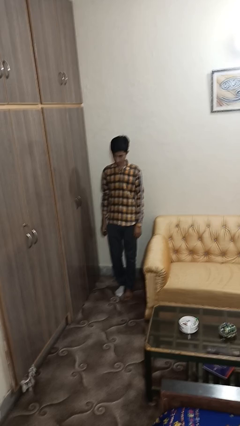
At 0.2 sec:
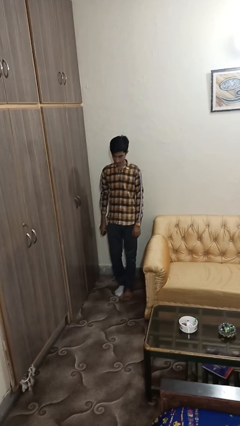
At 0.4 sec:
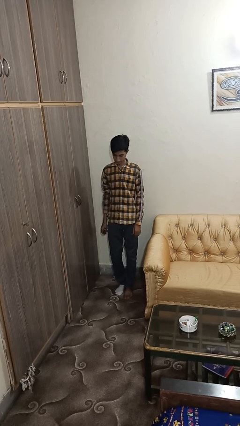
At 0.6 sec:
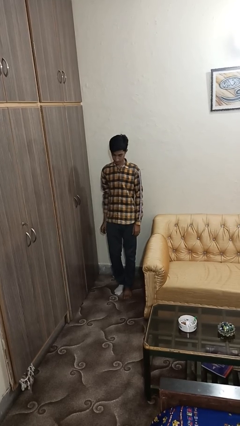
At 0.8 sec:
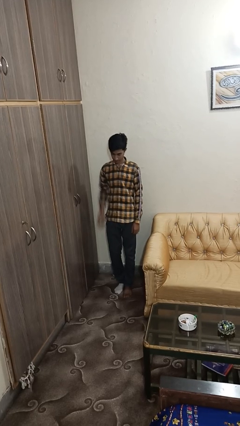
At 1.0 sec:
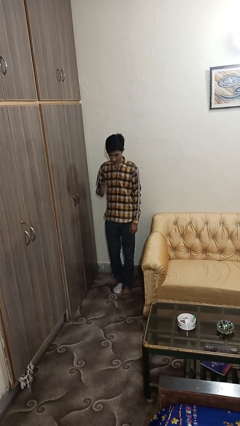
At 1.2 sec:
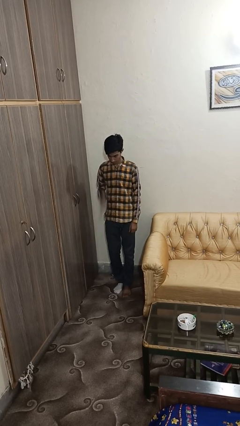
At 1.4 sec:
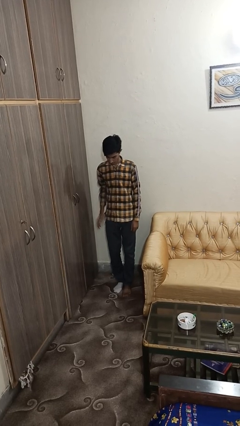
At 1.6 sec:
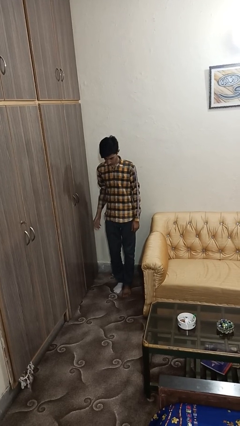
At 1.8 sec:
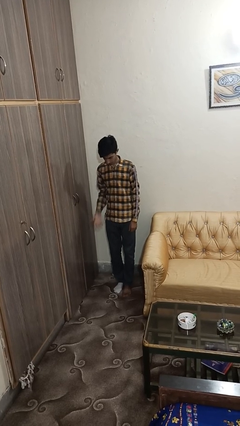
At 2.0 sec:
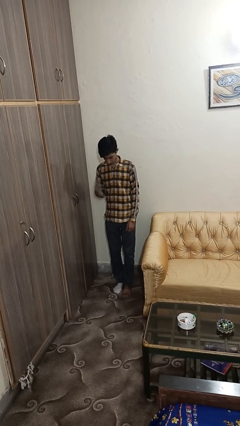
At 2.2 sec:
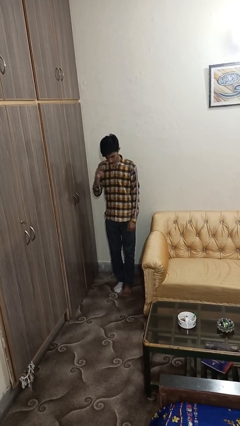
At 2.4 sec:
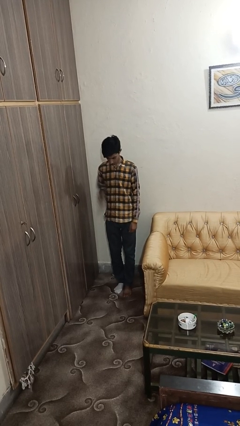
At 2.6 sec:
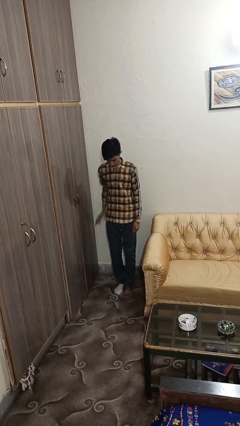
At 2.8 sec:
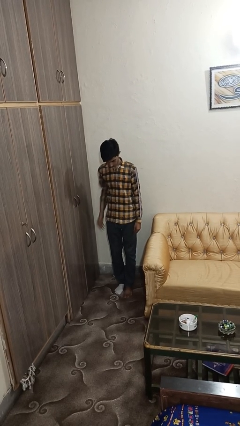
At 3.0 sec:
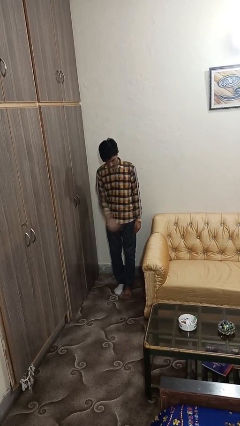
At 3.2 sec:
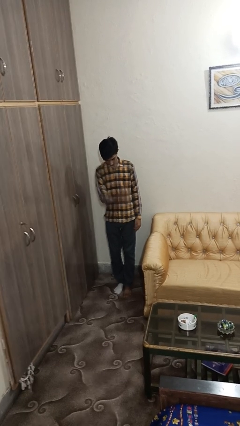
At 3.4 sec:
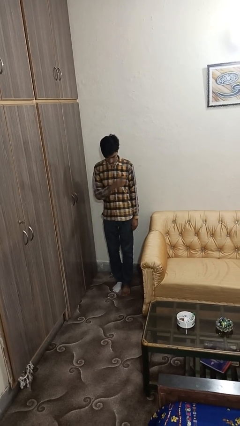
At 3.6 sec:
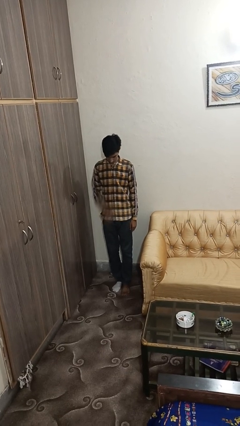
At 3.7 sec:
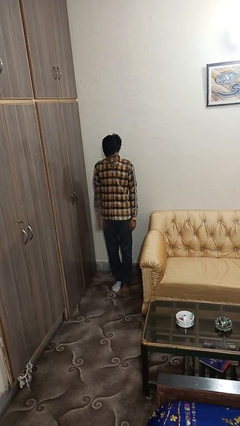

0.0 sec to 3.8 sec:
person bounces ball on floor

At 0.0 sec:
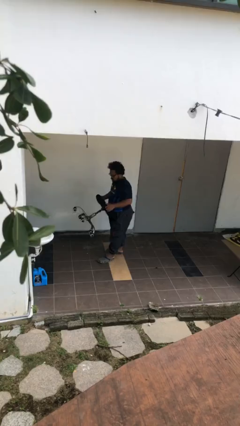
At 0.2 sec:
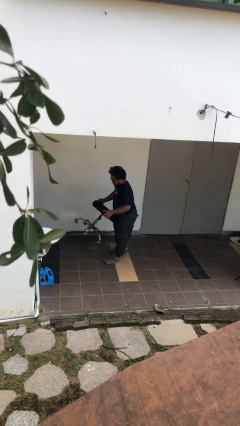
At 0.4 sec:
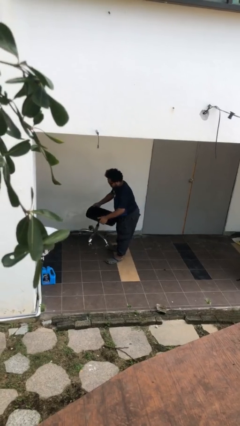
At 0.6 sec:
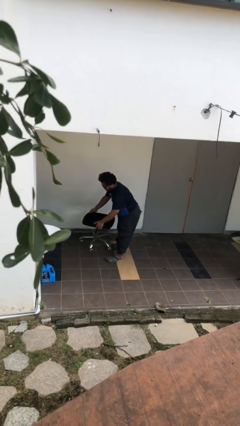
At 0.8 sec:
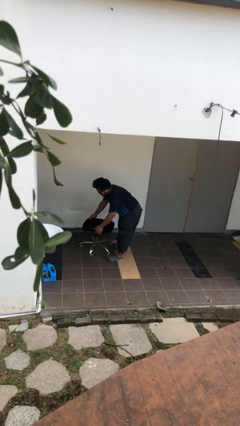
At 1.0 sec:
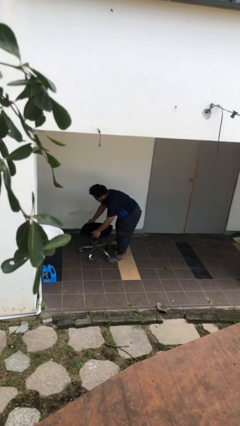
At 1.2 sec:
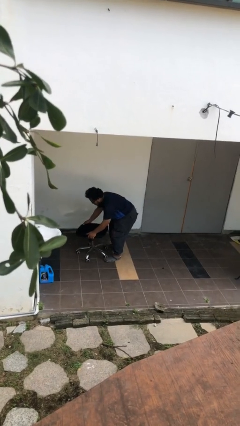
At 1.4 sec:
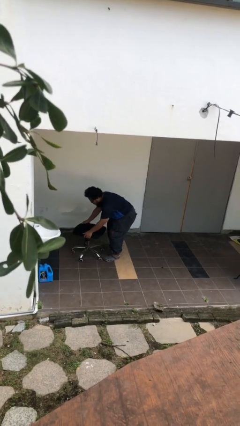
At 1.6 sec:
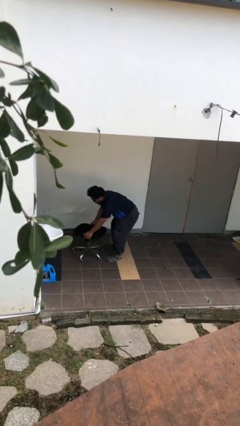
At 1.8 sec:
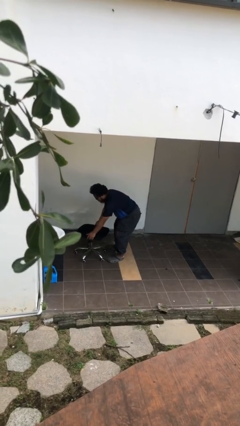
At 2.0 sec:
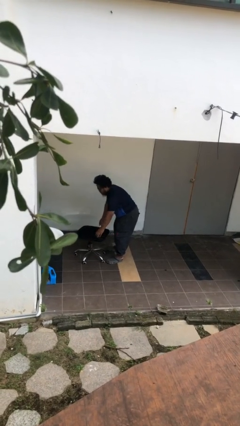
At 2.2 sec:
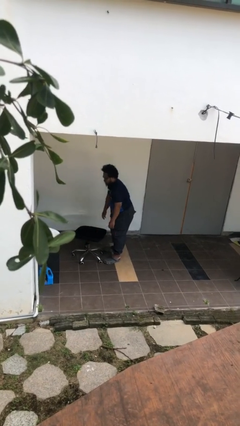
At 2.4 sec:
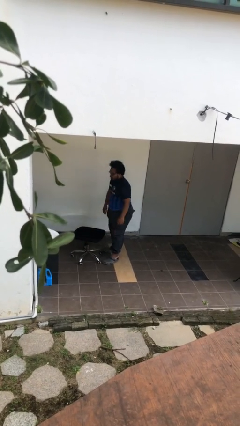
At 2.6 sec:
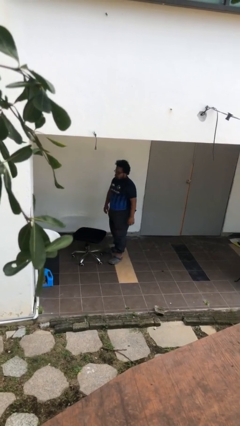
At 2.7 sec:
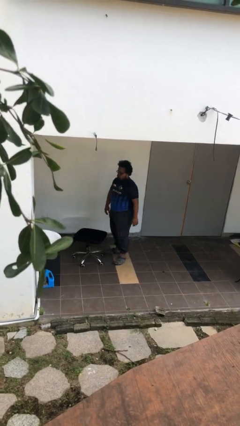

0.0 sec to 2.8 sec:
person puts down object on floor

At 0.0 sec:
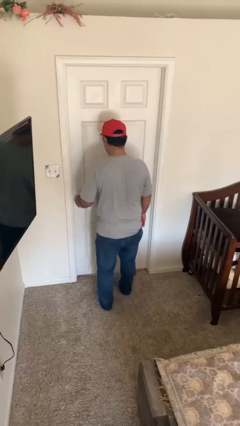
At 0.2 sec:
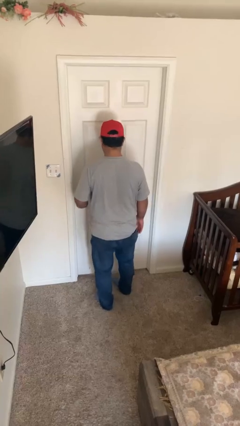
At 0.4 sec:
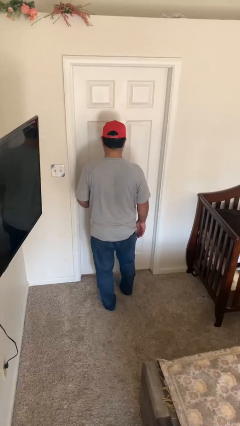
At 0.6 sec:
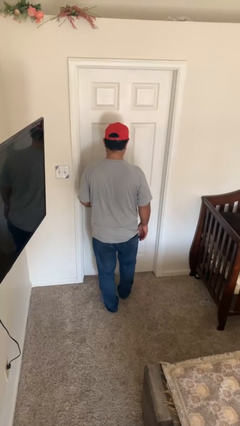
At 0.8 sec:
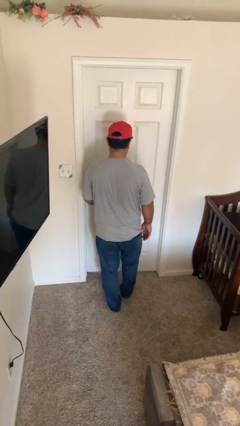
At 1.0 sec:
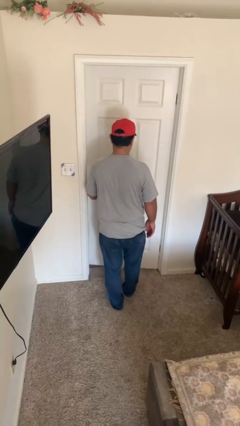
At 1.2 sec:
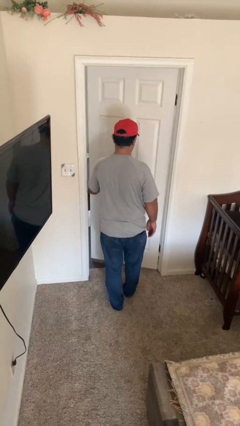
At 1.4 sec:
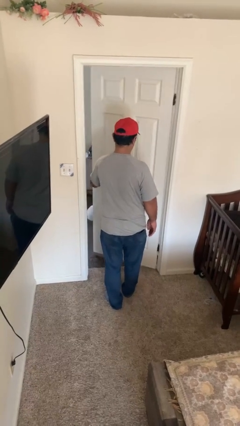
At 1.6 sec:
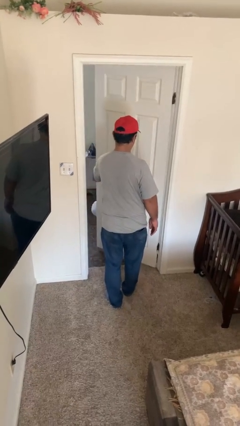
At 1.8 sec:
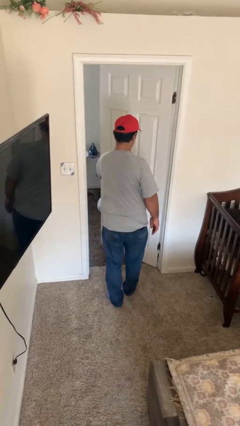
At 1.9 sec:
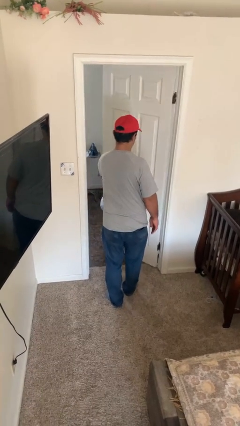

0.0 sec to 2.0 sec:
person opens facility door

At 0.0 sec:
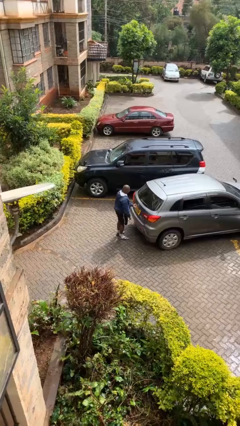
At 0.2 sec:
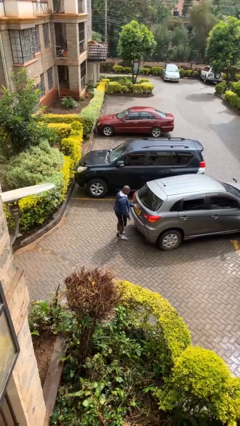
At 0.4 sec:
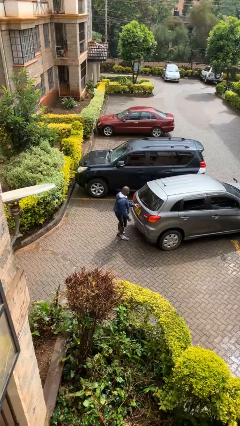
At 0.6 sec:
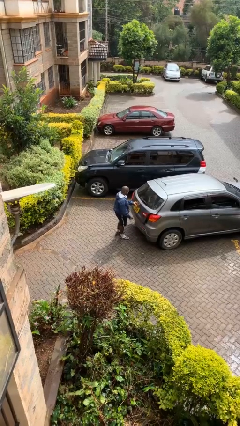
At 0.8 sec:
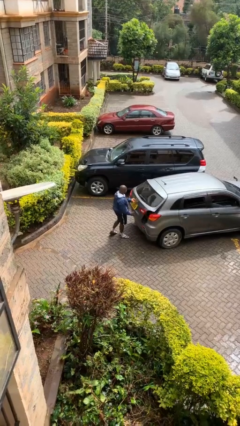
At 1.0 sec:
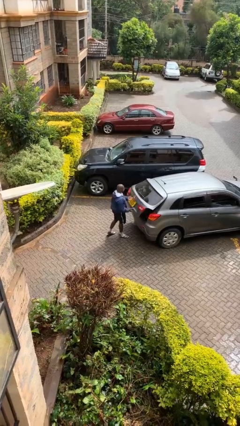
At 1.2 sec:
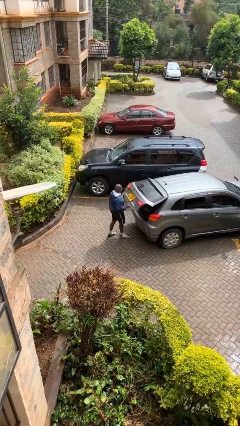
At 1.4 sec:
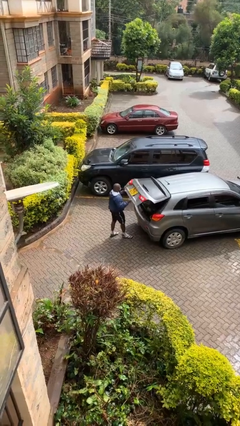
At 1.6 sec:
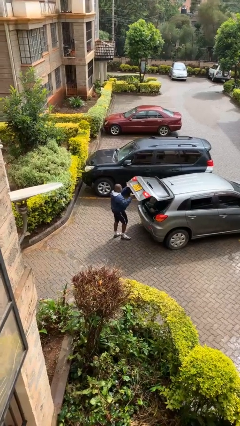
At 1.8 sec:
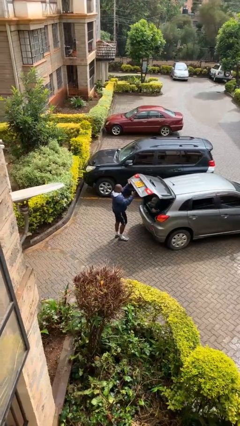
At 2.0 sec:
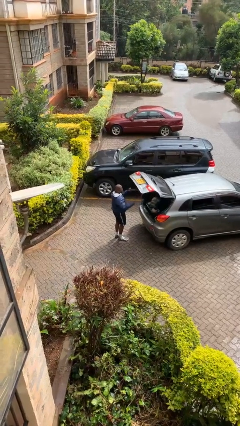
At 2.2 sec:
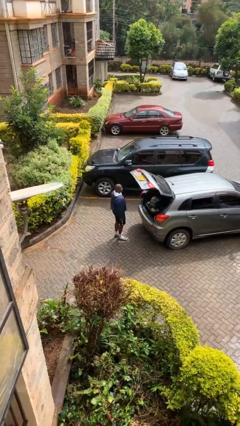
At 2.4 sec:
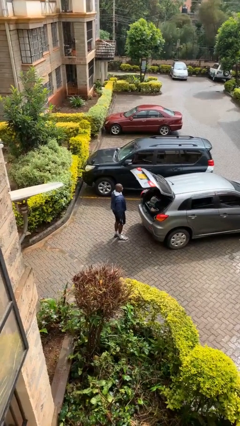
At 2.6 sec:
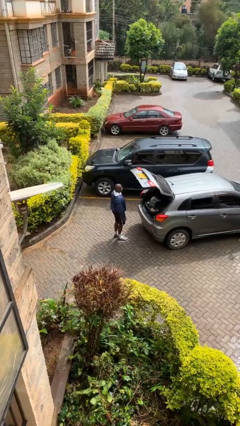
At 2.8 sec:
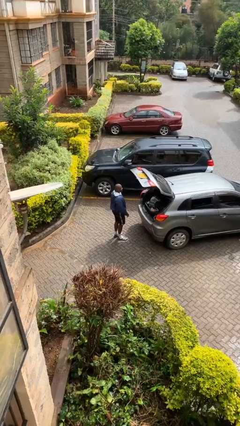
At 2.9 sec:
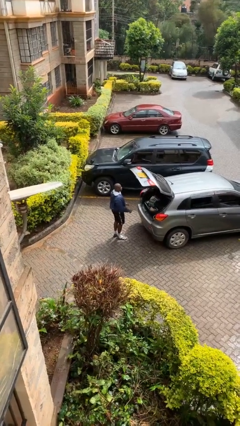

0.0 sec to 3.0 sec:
person opens car trunk

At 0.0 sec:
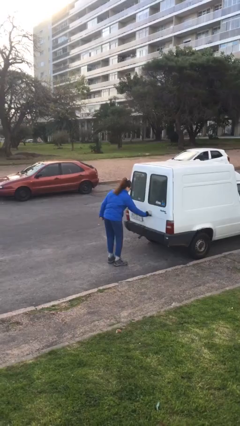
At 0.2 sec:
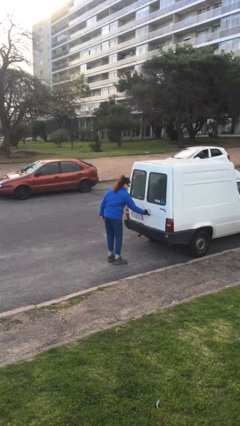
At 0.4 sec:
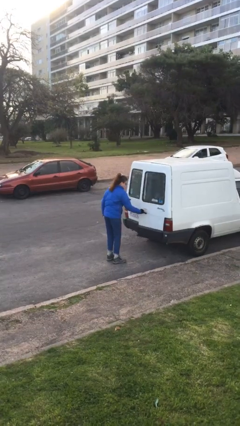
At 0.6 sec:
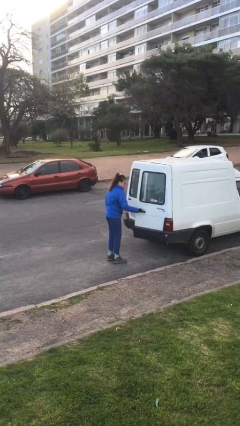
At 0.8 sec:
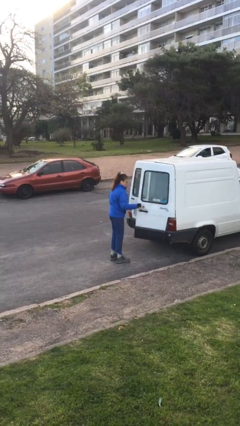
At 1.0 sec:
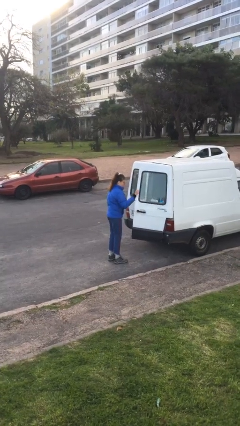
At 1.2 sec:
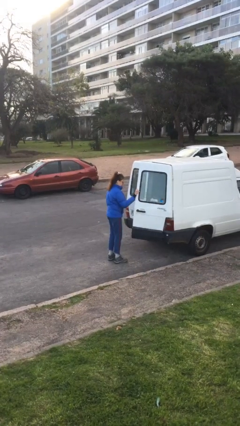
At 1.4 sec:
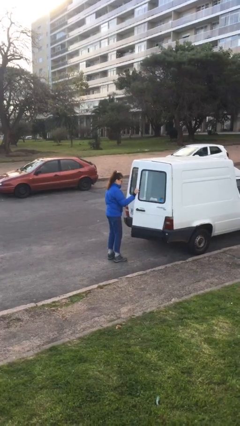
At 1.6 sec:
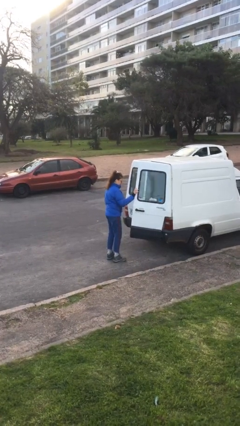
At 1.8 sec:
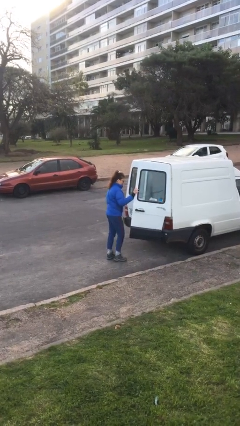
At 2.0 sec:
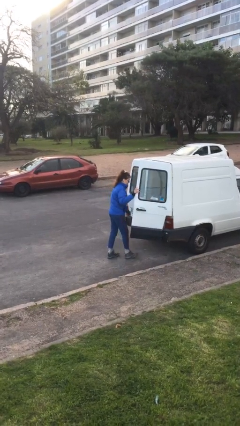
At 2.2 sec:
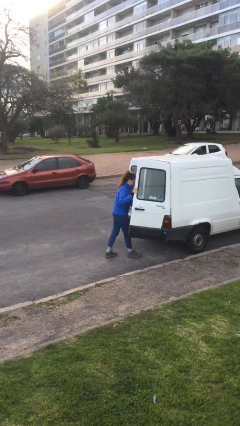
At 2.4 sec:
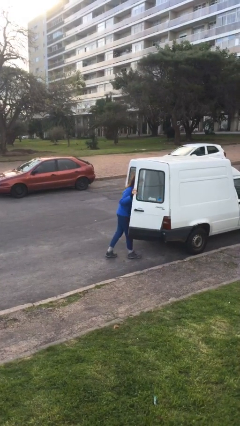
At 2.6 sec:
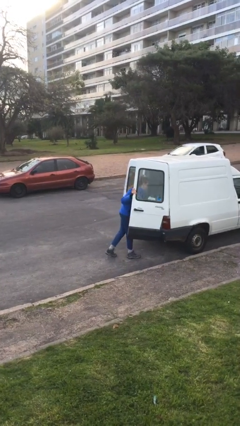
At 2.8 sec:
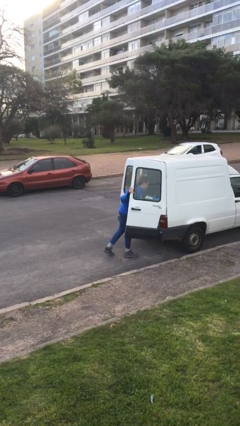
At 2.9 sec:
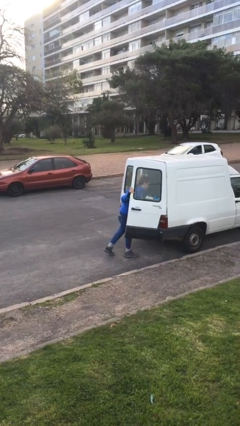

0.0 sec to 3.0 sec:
person opens car door

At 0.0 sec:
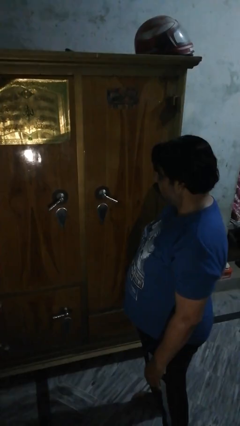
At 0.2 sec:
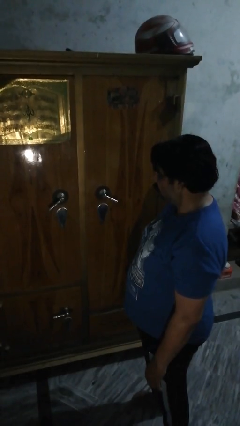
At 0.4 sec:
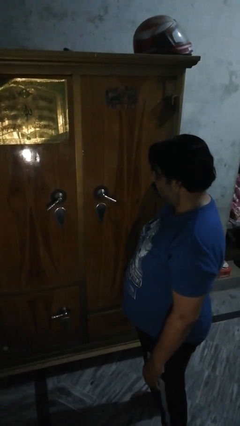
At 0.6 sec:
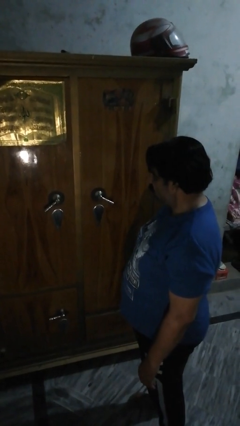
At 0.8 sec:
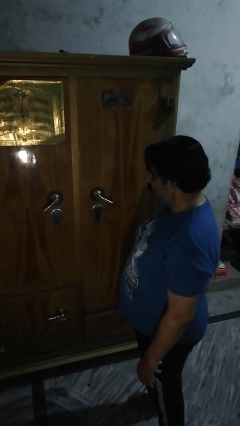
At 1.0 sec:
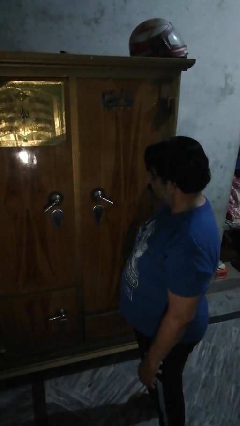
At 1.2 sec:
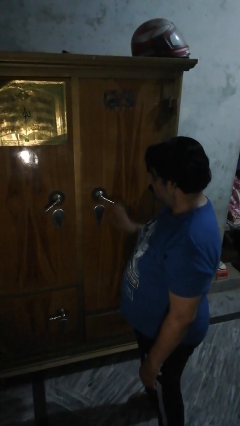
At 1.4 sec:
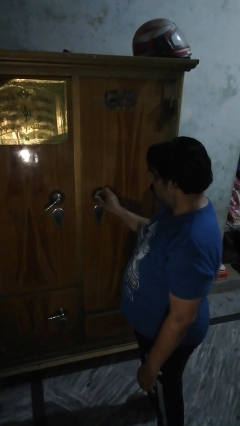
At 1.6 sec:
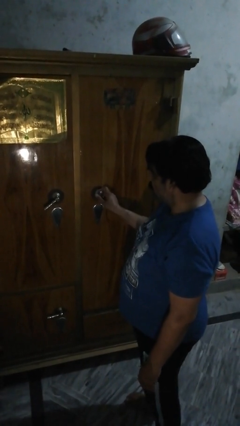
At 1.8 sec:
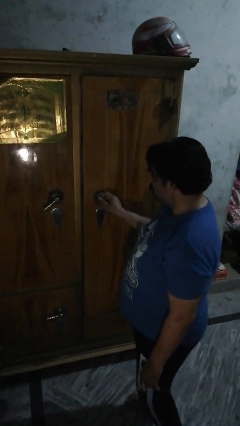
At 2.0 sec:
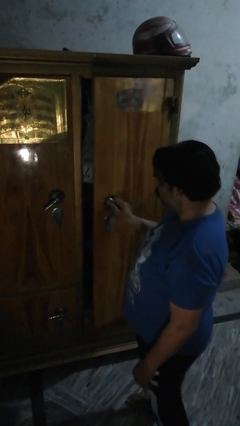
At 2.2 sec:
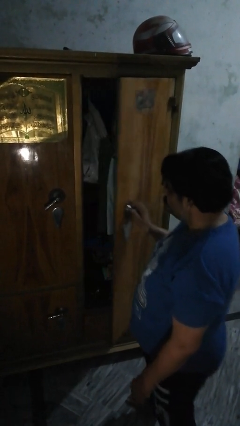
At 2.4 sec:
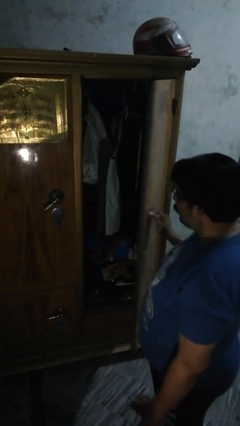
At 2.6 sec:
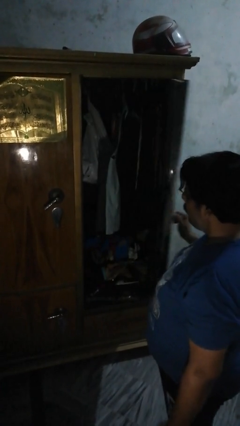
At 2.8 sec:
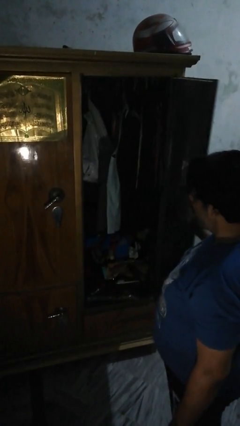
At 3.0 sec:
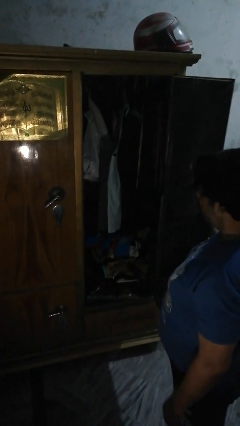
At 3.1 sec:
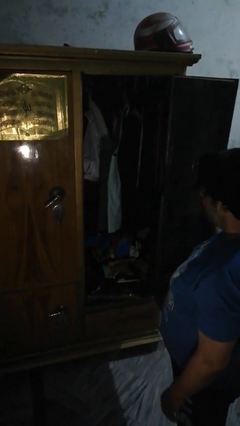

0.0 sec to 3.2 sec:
person opens closet door
